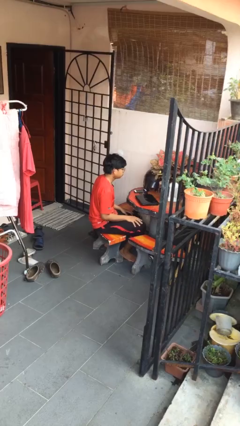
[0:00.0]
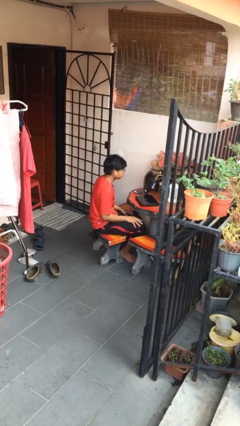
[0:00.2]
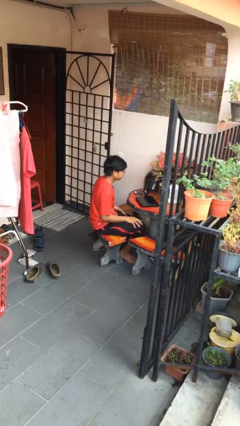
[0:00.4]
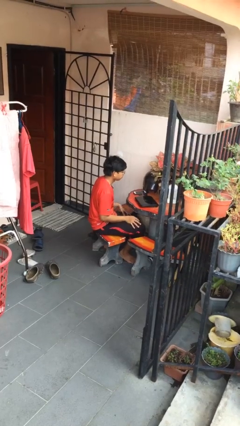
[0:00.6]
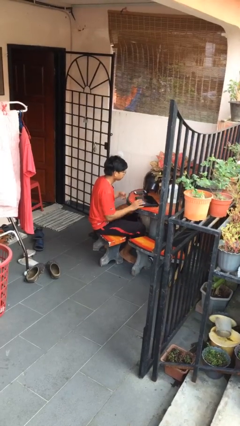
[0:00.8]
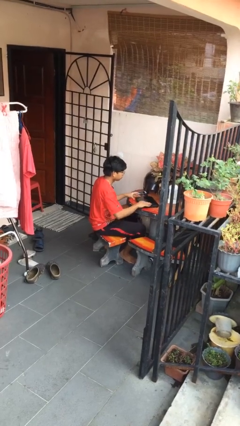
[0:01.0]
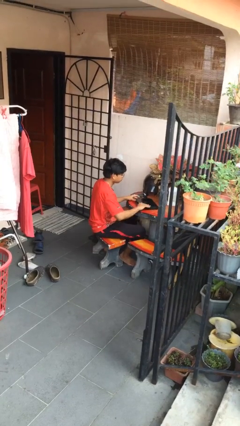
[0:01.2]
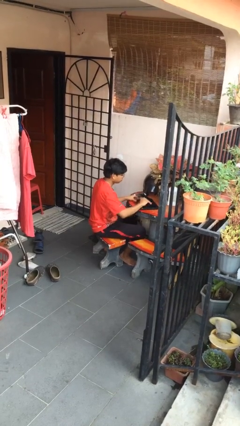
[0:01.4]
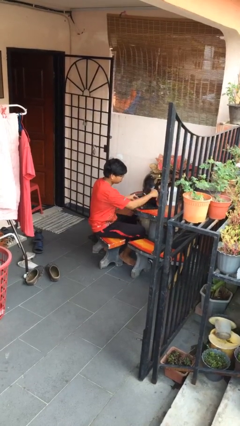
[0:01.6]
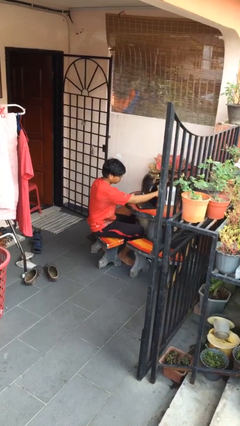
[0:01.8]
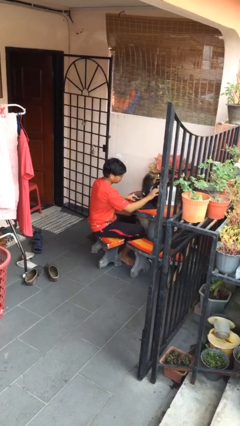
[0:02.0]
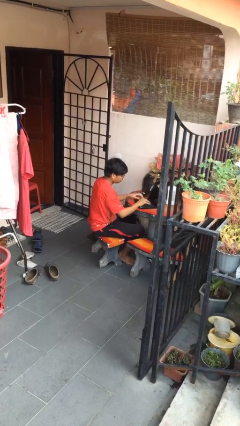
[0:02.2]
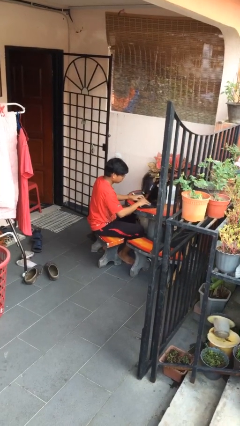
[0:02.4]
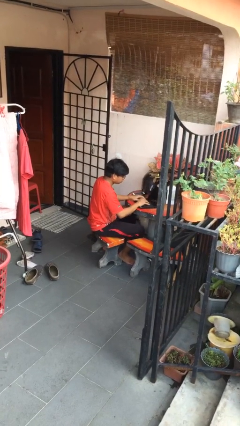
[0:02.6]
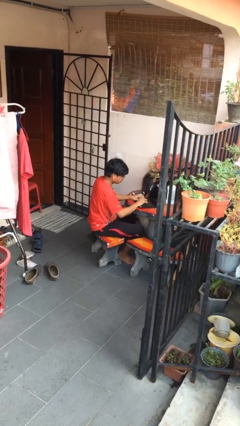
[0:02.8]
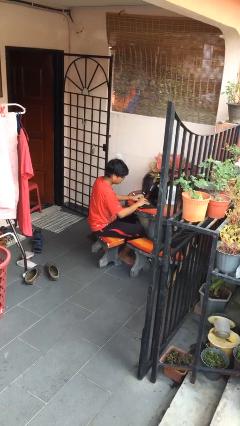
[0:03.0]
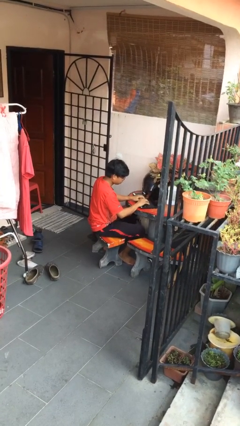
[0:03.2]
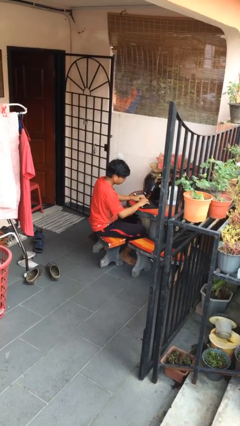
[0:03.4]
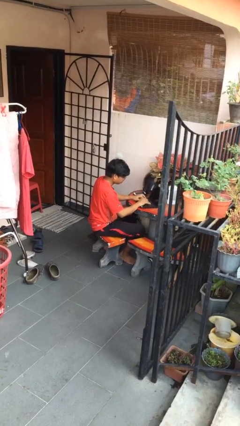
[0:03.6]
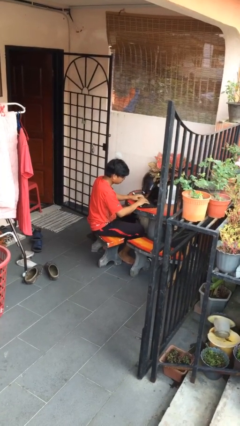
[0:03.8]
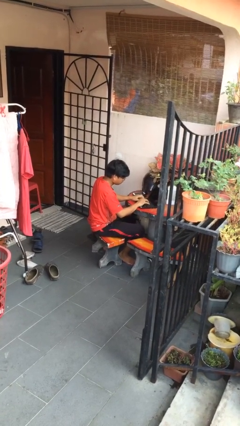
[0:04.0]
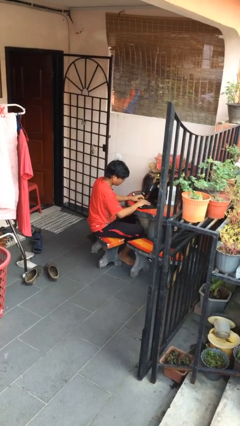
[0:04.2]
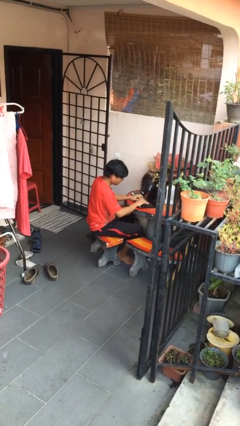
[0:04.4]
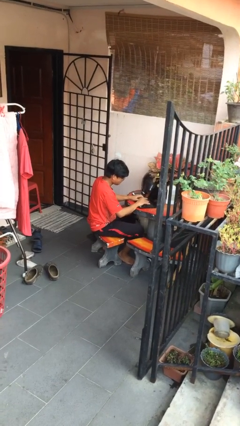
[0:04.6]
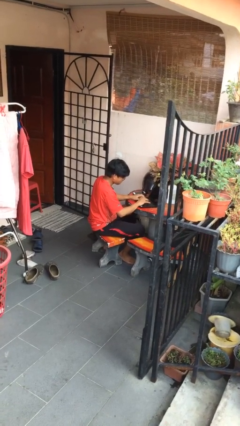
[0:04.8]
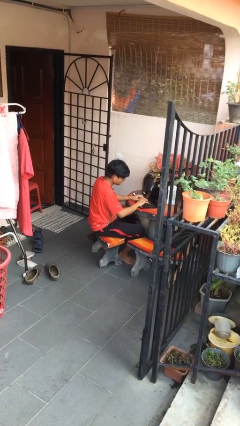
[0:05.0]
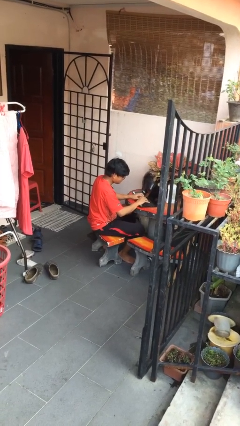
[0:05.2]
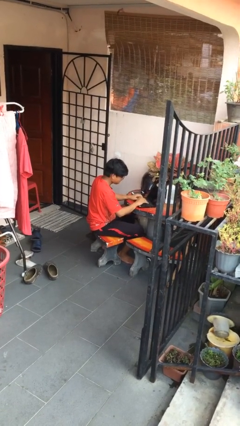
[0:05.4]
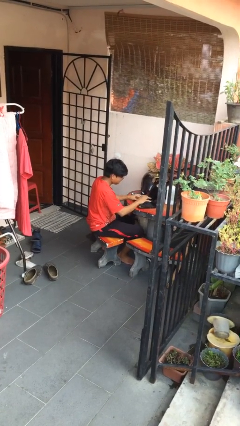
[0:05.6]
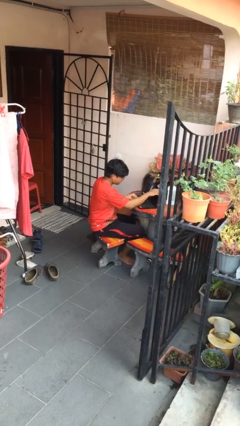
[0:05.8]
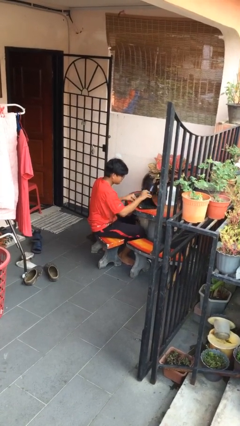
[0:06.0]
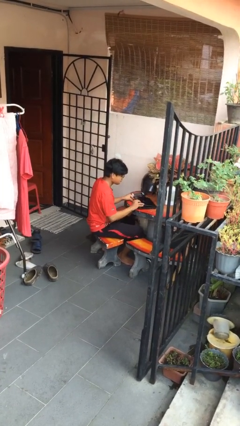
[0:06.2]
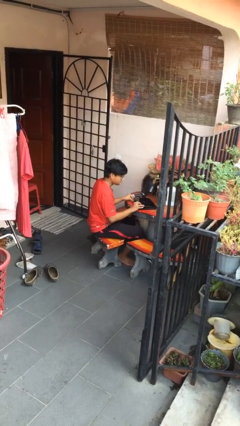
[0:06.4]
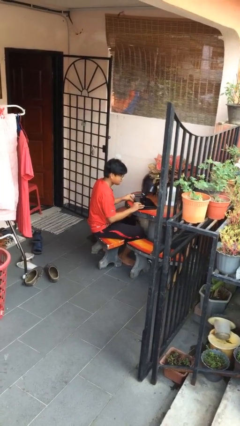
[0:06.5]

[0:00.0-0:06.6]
person interacts with laptop

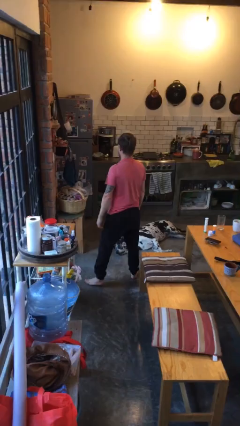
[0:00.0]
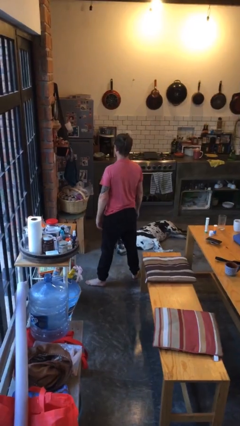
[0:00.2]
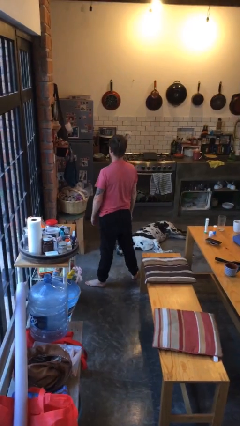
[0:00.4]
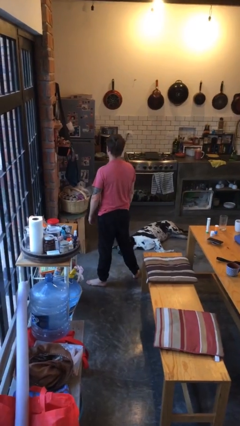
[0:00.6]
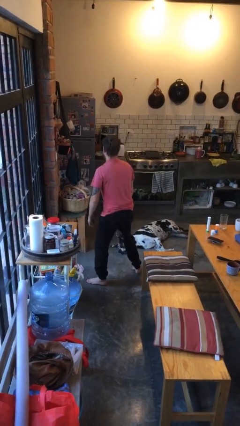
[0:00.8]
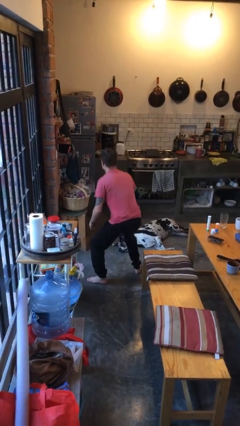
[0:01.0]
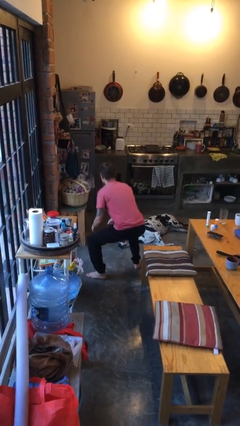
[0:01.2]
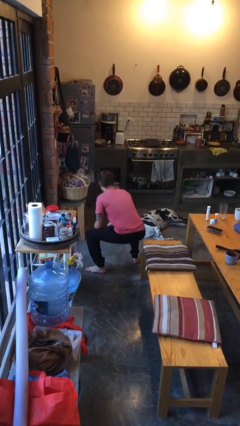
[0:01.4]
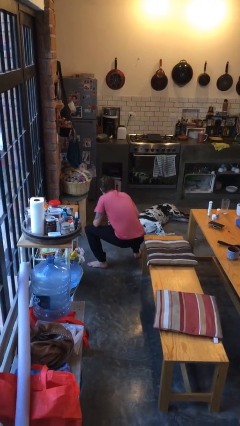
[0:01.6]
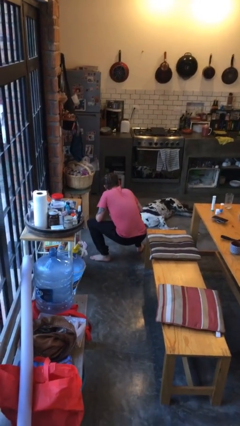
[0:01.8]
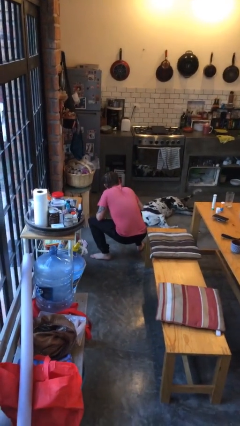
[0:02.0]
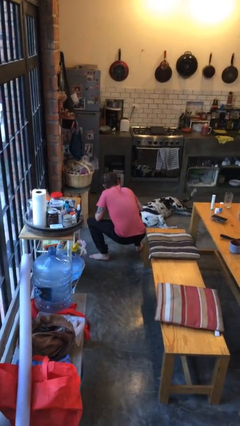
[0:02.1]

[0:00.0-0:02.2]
person squats

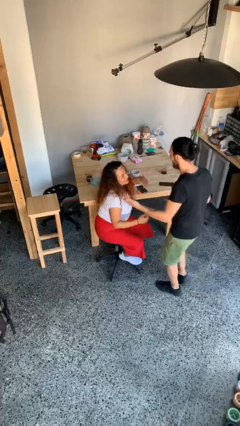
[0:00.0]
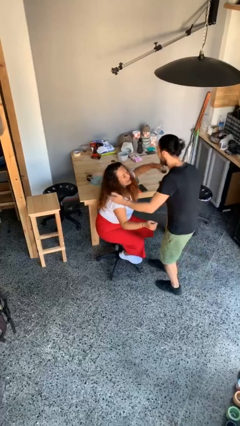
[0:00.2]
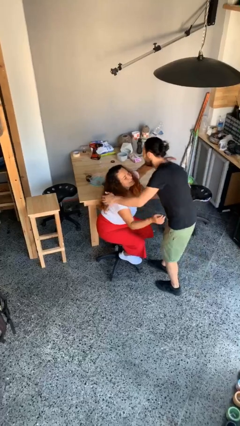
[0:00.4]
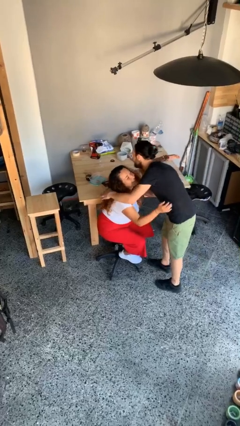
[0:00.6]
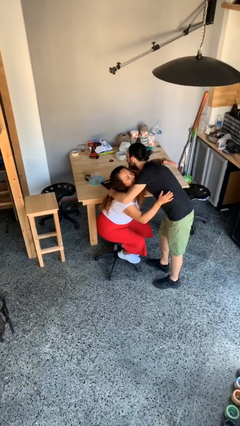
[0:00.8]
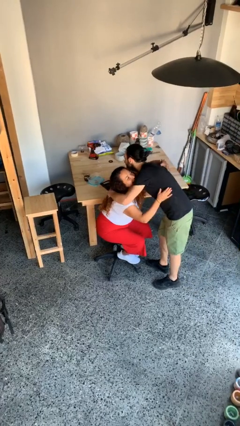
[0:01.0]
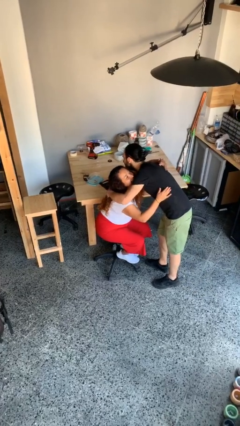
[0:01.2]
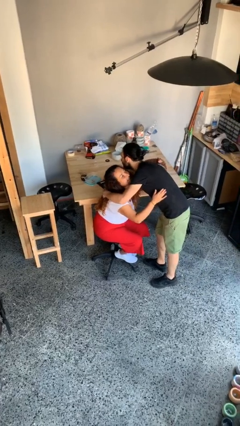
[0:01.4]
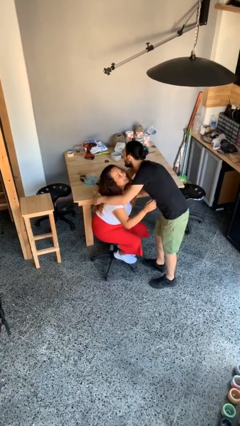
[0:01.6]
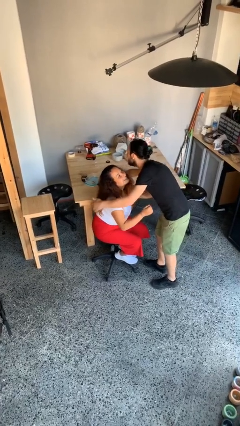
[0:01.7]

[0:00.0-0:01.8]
person embraces person

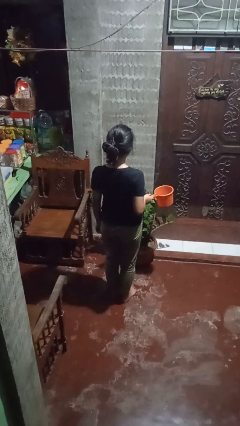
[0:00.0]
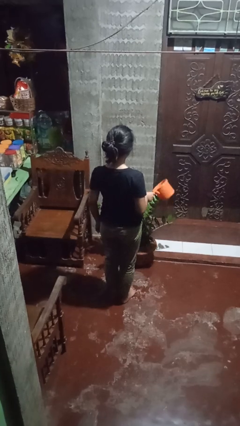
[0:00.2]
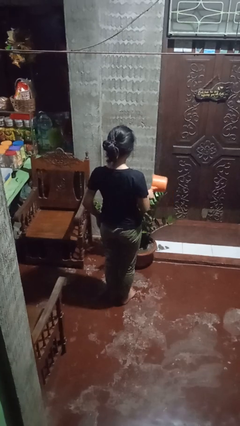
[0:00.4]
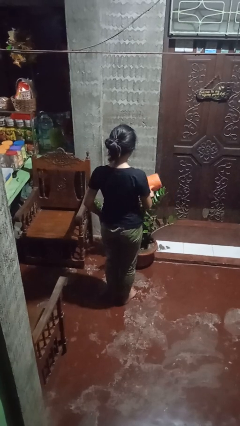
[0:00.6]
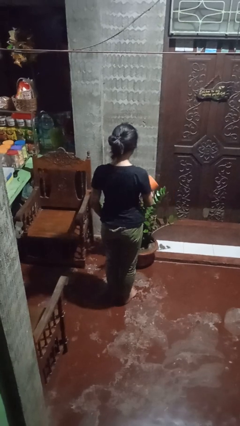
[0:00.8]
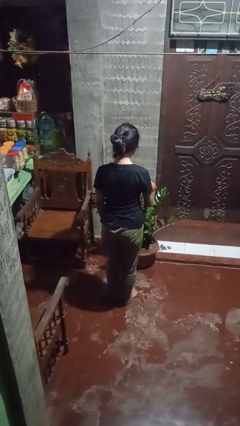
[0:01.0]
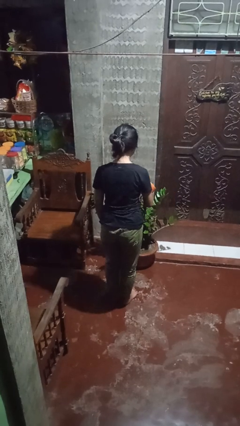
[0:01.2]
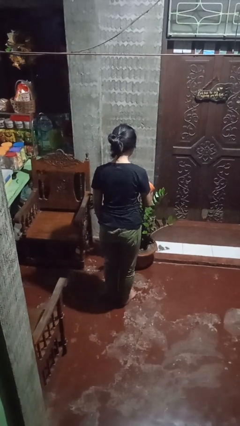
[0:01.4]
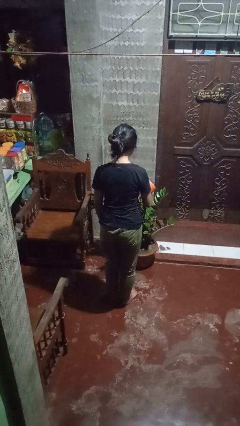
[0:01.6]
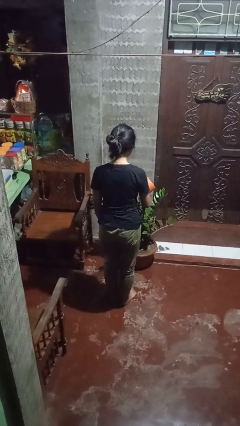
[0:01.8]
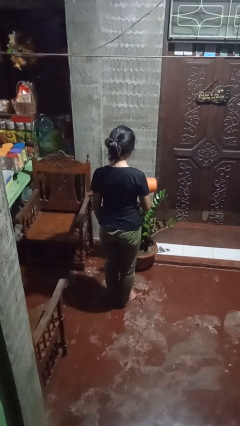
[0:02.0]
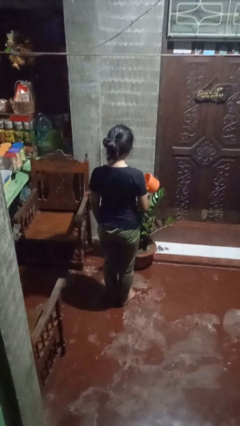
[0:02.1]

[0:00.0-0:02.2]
person waters houseplant

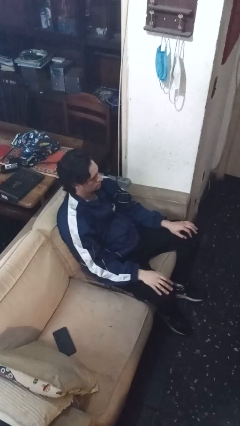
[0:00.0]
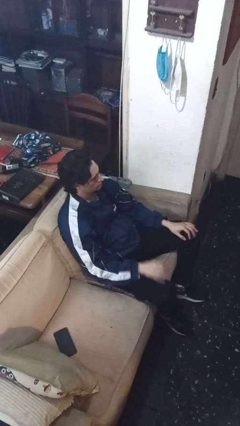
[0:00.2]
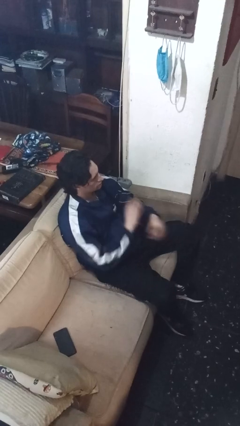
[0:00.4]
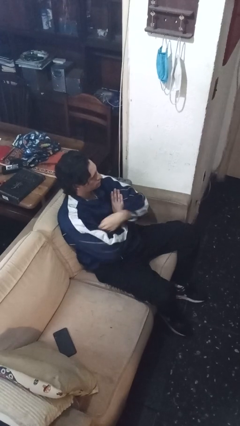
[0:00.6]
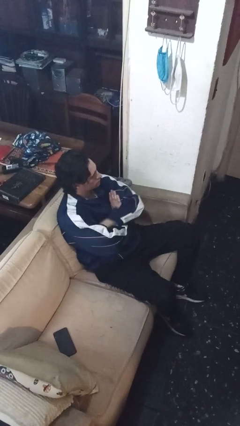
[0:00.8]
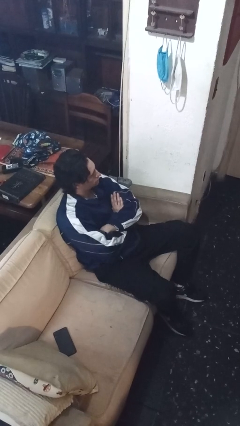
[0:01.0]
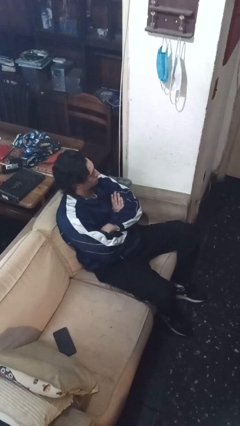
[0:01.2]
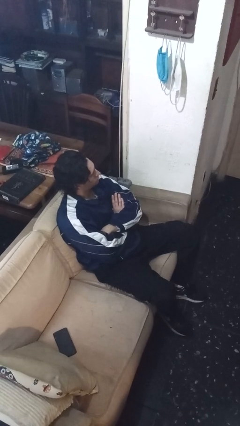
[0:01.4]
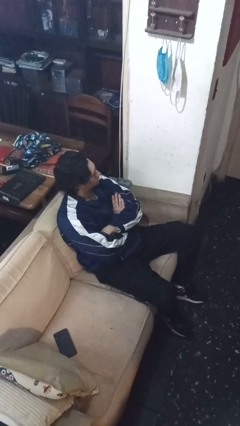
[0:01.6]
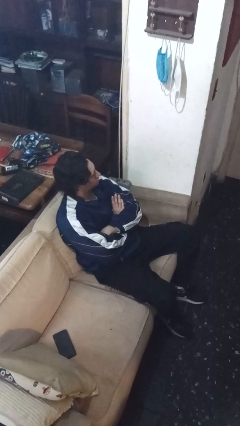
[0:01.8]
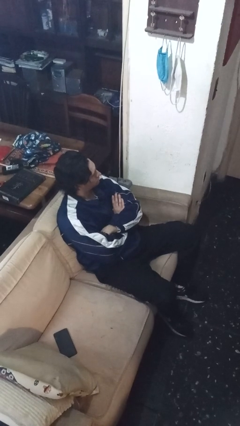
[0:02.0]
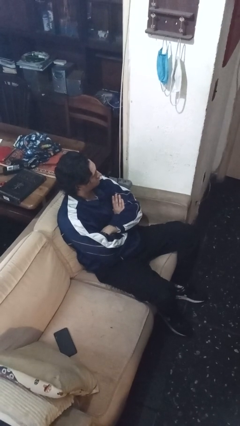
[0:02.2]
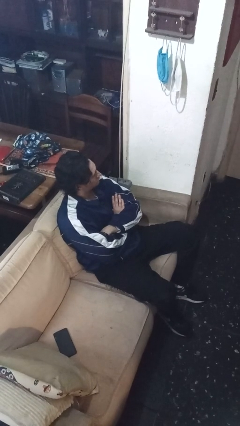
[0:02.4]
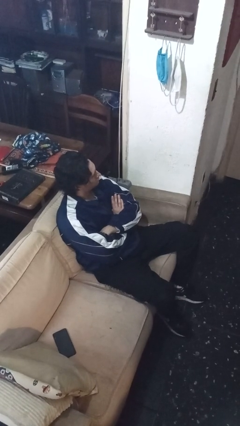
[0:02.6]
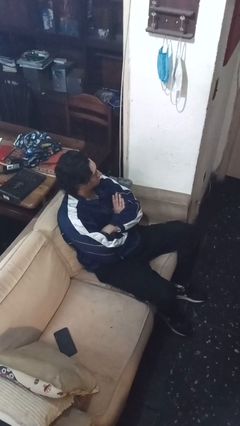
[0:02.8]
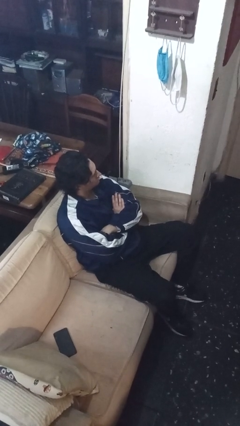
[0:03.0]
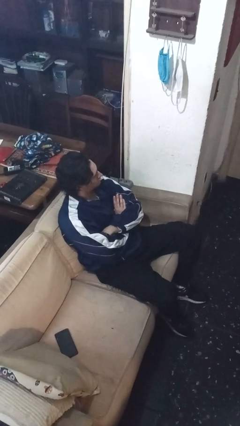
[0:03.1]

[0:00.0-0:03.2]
person crosses arms

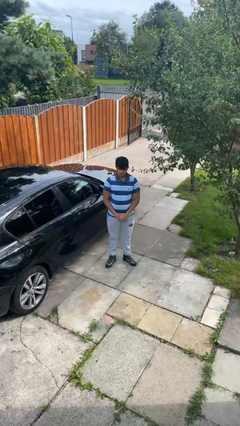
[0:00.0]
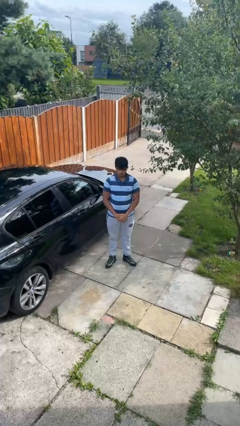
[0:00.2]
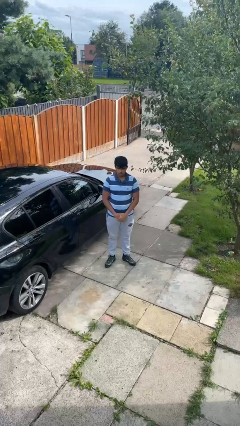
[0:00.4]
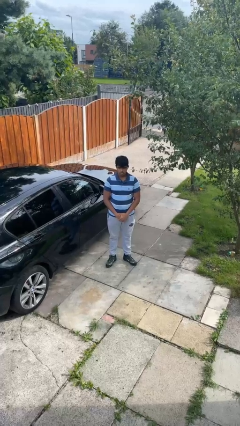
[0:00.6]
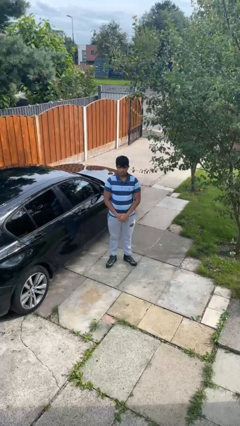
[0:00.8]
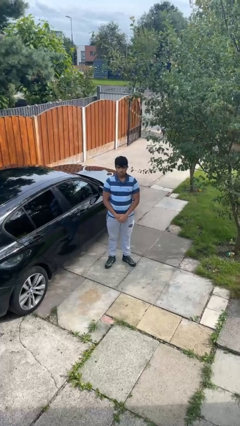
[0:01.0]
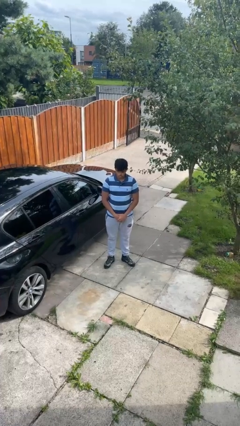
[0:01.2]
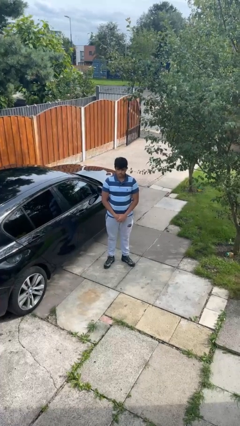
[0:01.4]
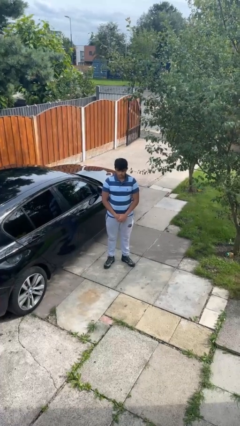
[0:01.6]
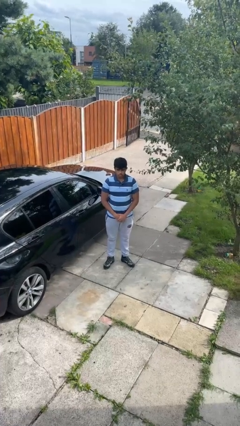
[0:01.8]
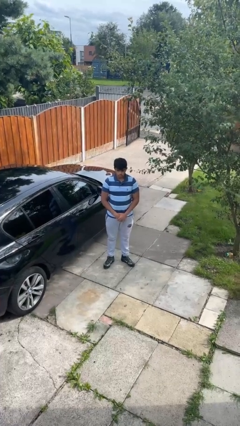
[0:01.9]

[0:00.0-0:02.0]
person nods head
